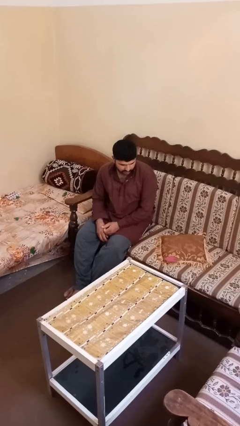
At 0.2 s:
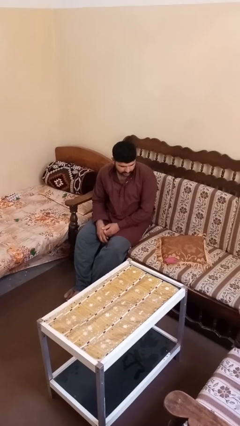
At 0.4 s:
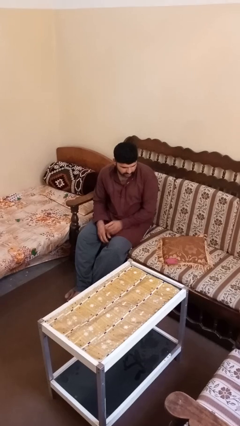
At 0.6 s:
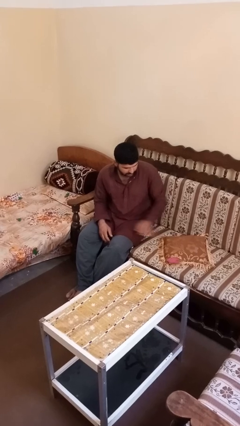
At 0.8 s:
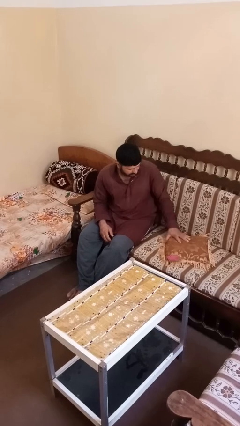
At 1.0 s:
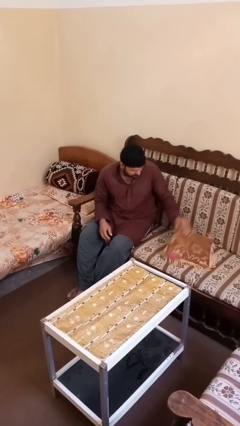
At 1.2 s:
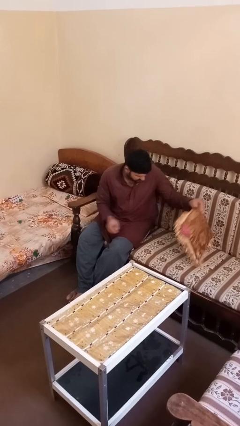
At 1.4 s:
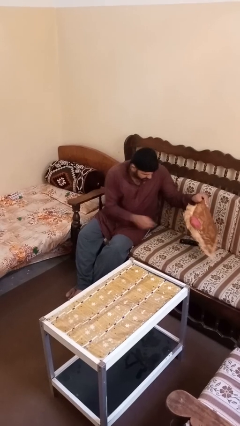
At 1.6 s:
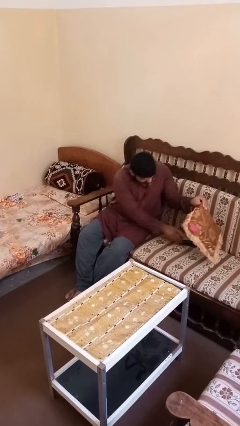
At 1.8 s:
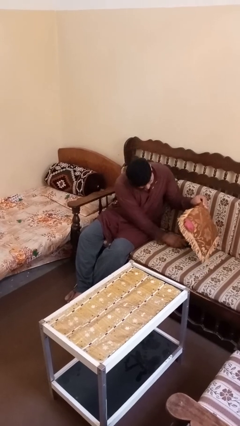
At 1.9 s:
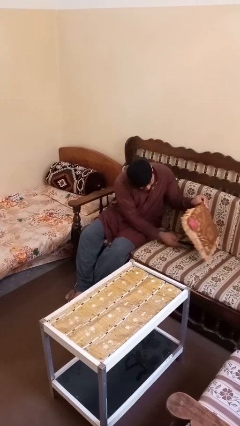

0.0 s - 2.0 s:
person searches in couch

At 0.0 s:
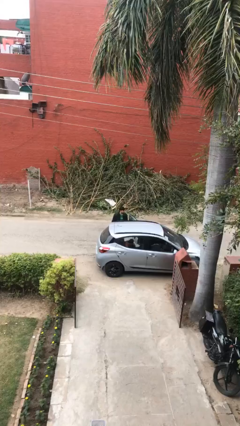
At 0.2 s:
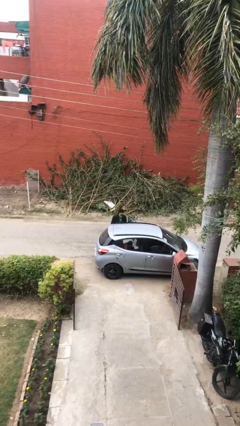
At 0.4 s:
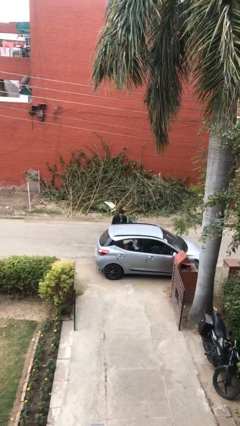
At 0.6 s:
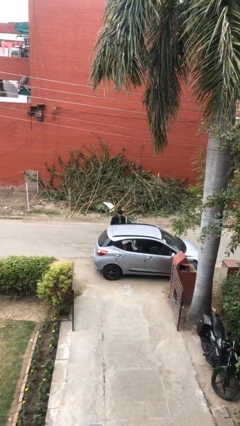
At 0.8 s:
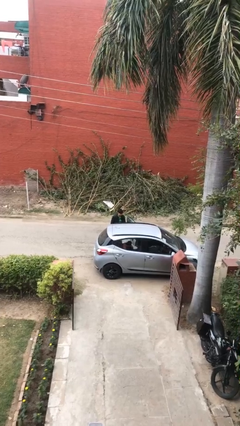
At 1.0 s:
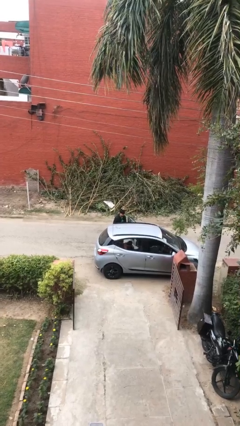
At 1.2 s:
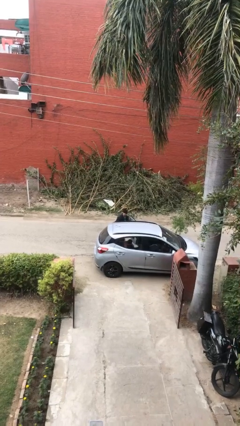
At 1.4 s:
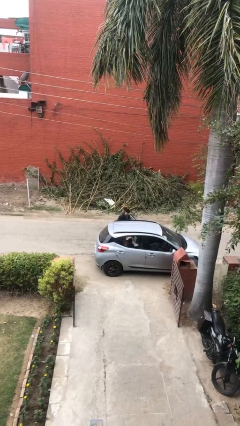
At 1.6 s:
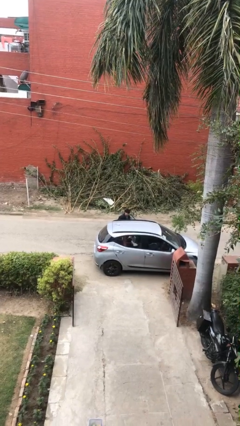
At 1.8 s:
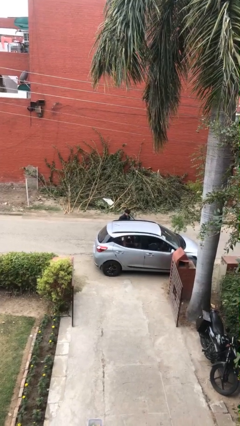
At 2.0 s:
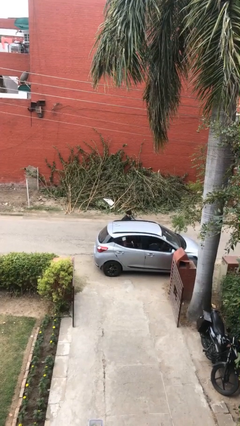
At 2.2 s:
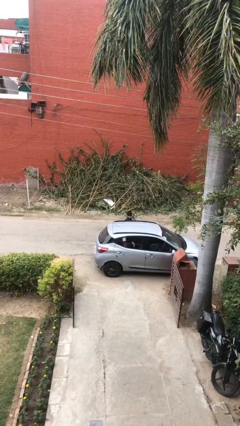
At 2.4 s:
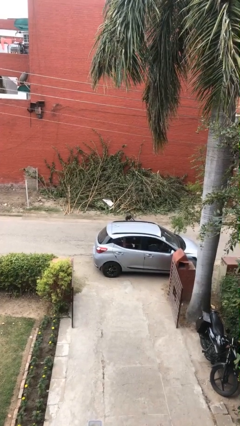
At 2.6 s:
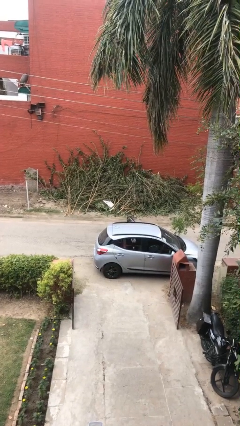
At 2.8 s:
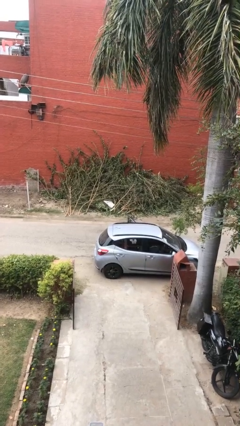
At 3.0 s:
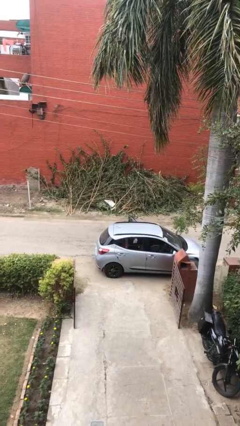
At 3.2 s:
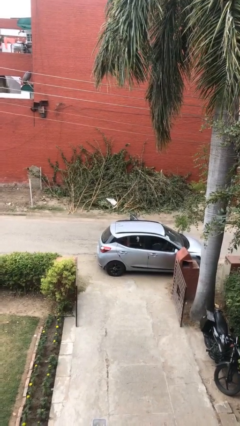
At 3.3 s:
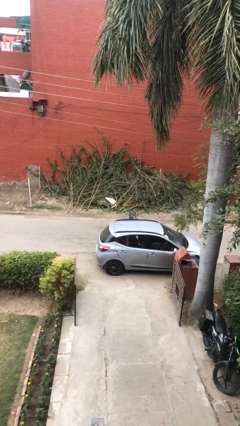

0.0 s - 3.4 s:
person enters car

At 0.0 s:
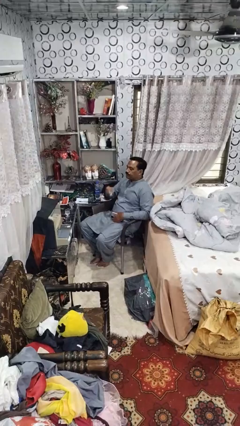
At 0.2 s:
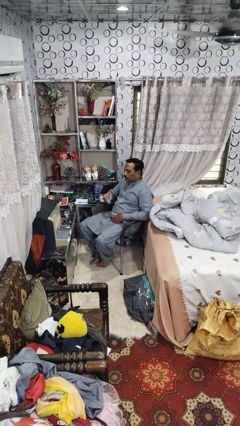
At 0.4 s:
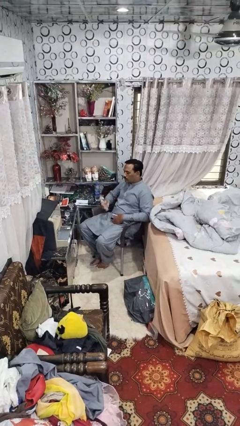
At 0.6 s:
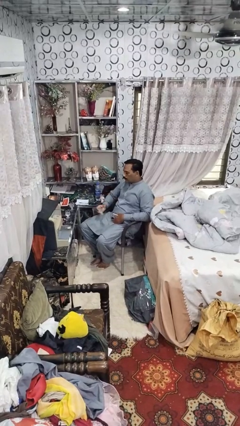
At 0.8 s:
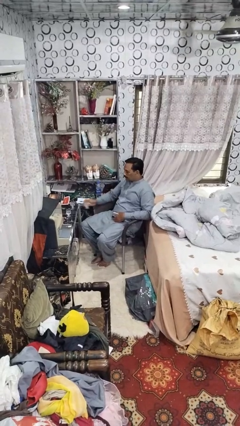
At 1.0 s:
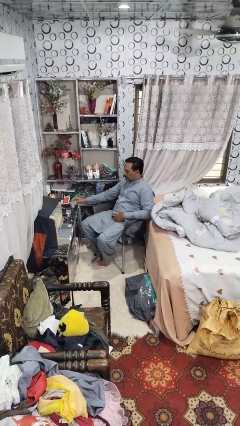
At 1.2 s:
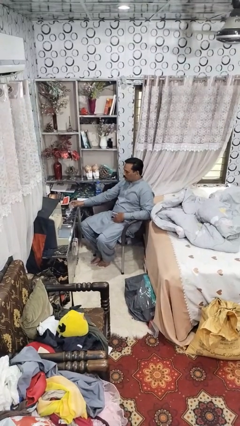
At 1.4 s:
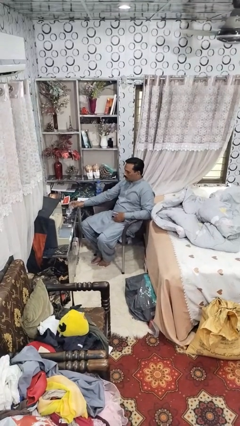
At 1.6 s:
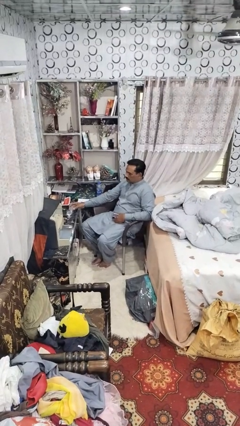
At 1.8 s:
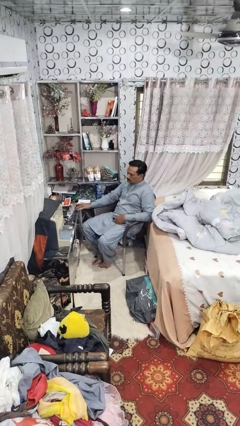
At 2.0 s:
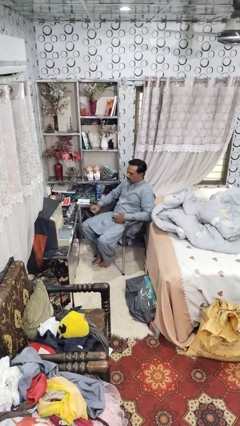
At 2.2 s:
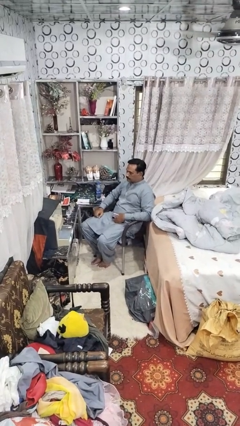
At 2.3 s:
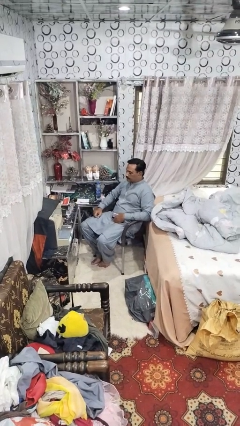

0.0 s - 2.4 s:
person puts down object on table

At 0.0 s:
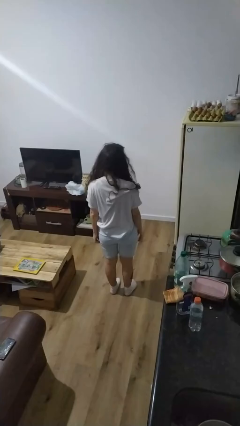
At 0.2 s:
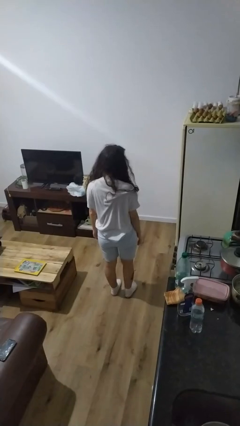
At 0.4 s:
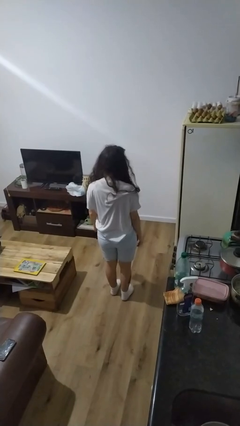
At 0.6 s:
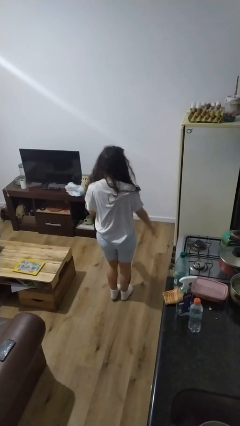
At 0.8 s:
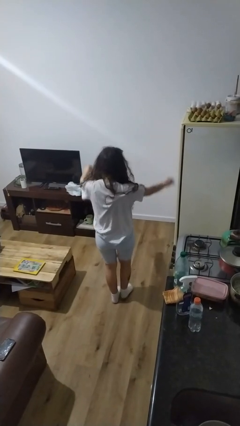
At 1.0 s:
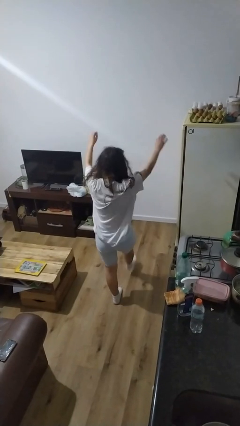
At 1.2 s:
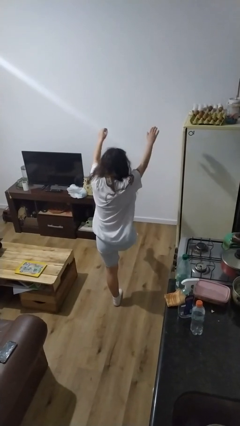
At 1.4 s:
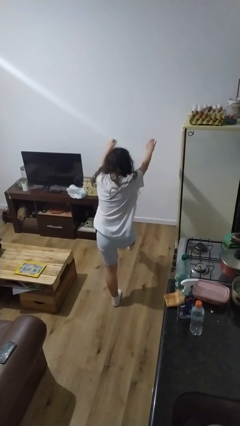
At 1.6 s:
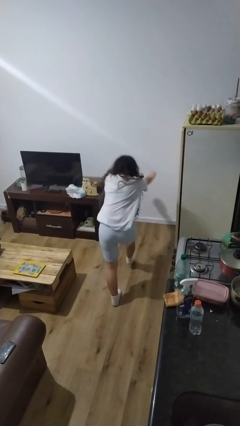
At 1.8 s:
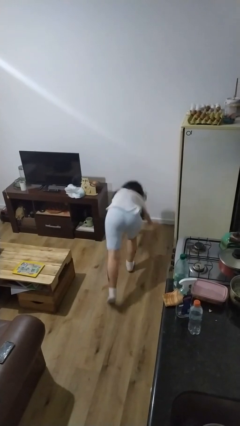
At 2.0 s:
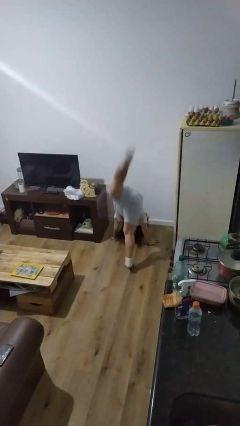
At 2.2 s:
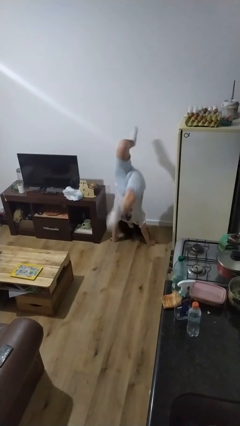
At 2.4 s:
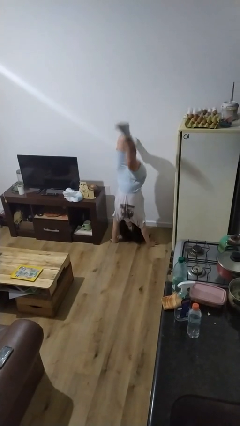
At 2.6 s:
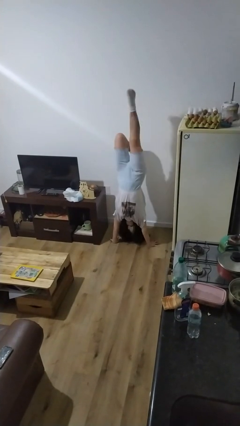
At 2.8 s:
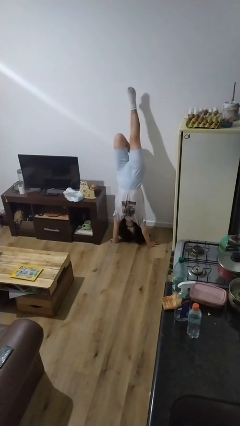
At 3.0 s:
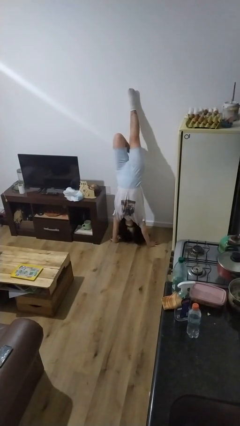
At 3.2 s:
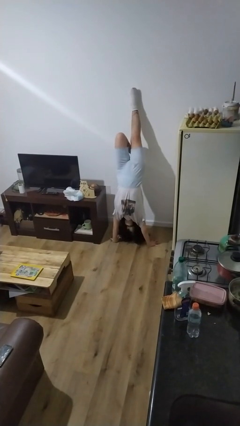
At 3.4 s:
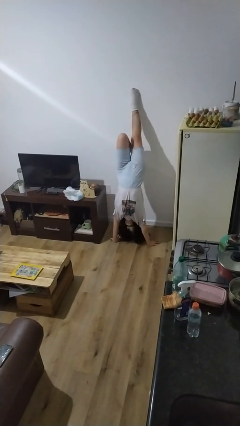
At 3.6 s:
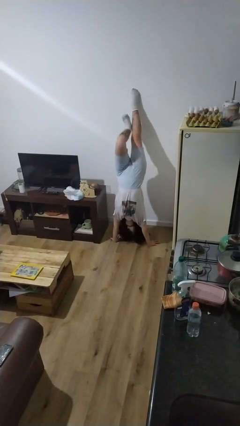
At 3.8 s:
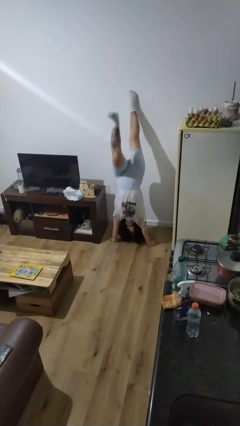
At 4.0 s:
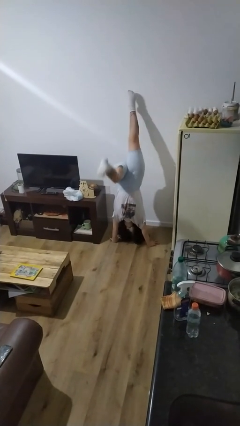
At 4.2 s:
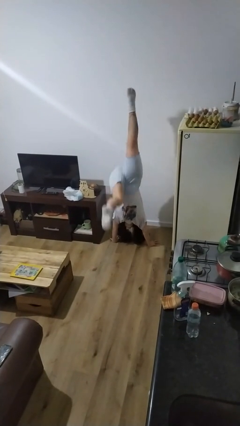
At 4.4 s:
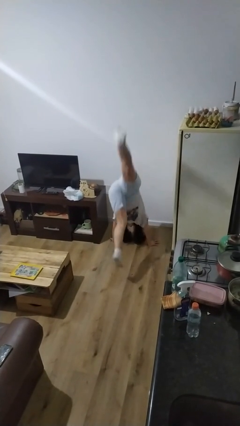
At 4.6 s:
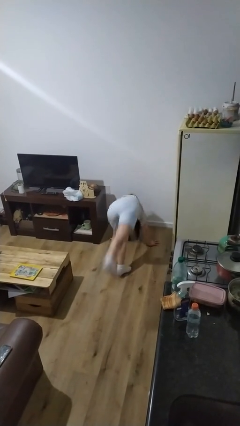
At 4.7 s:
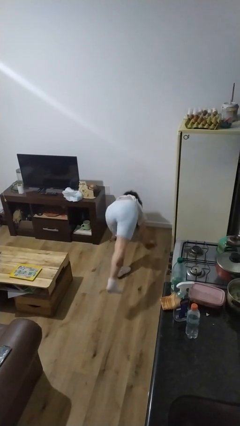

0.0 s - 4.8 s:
person handstand

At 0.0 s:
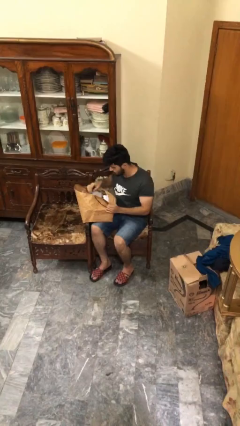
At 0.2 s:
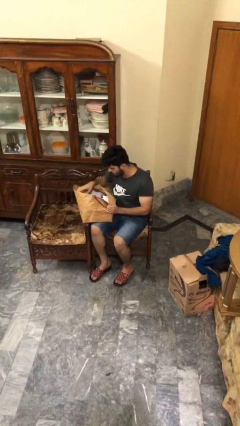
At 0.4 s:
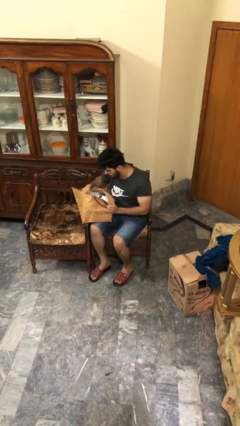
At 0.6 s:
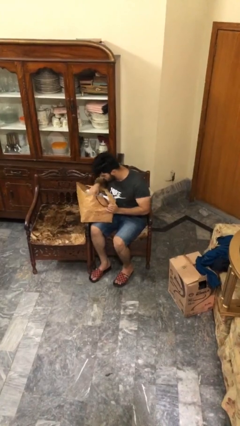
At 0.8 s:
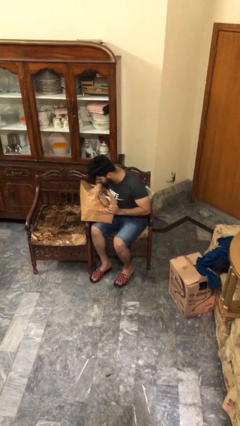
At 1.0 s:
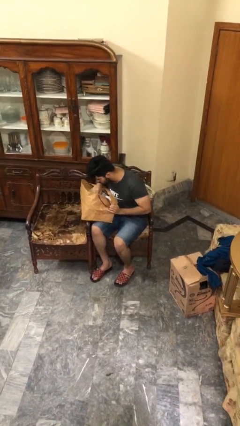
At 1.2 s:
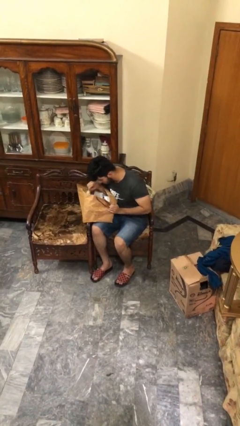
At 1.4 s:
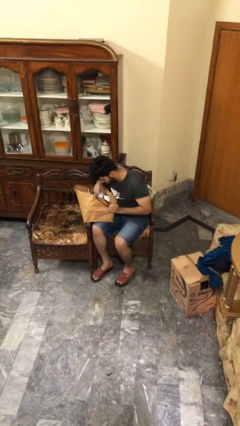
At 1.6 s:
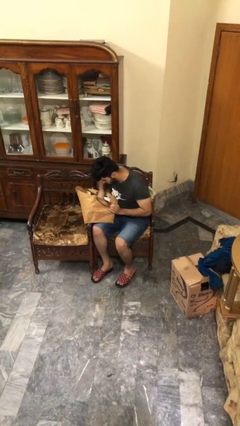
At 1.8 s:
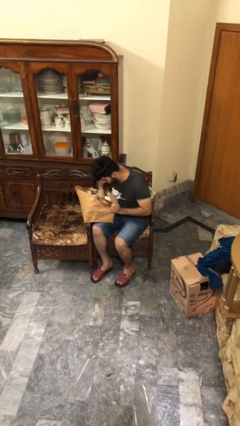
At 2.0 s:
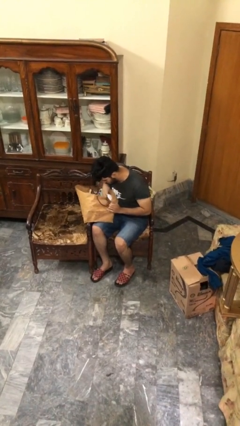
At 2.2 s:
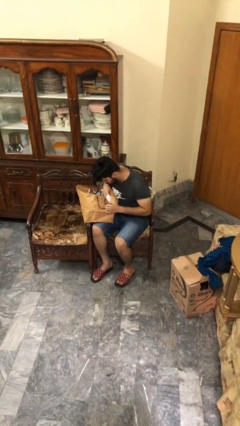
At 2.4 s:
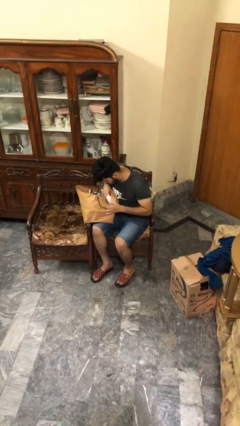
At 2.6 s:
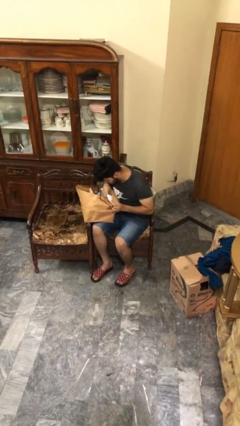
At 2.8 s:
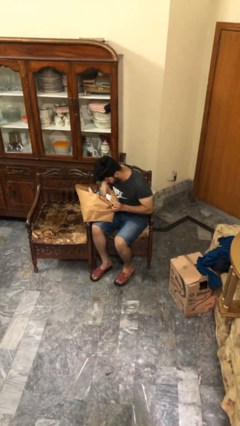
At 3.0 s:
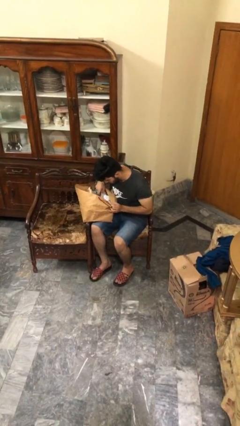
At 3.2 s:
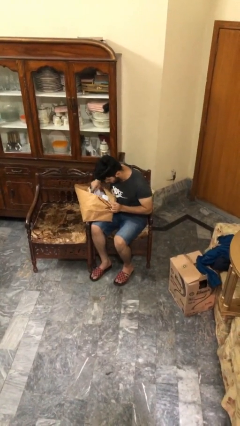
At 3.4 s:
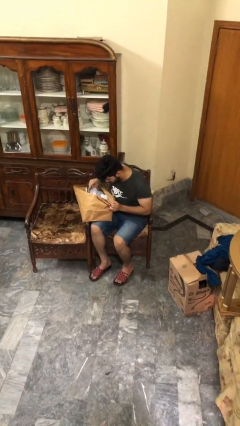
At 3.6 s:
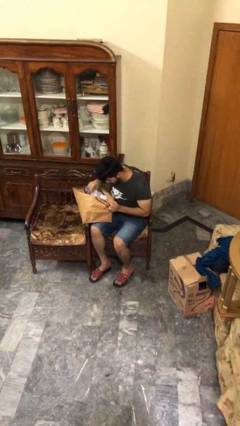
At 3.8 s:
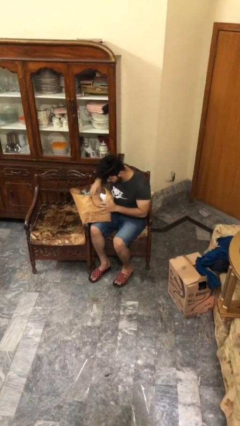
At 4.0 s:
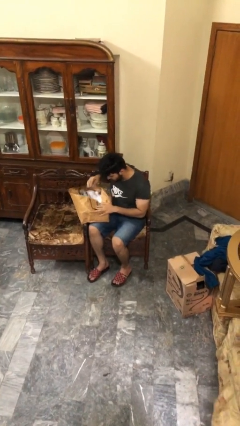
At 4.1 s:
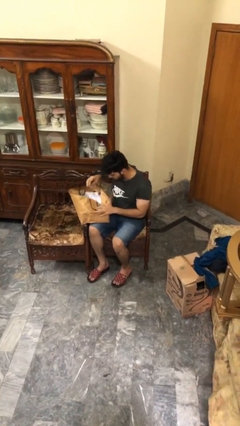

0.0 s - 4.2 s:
person searches in bag

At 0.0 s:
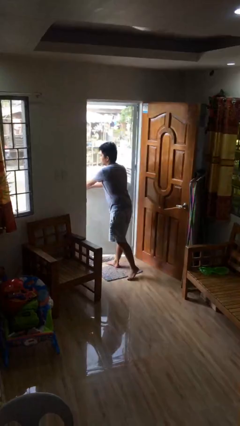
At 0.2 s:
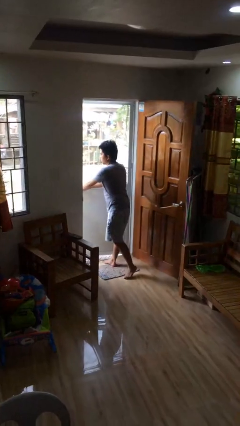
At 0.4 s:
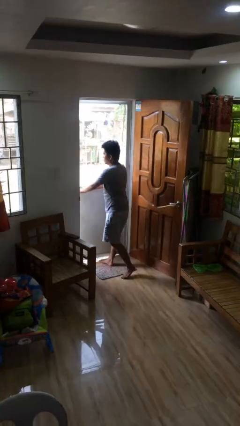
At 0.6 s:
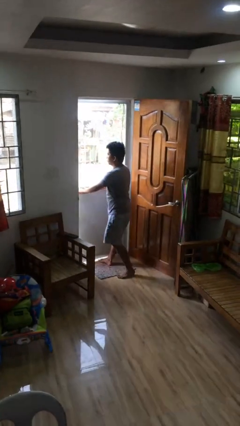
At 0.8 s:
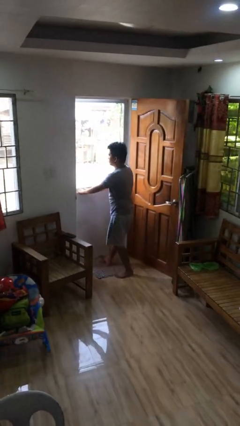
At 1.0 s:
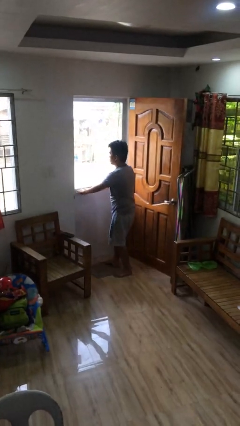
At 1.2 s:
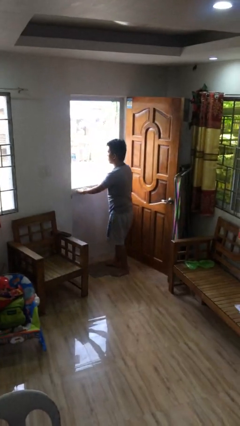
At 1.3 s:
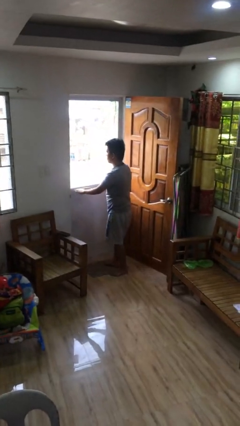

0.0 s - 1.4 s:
person closes facility door
